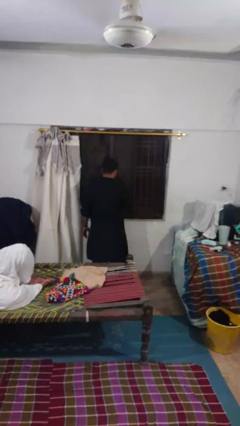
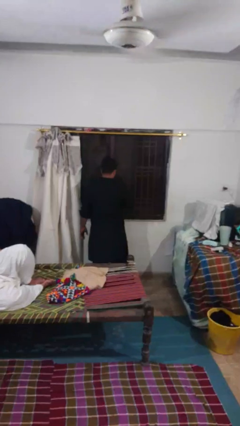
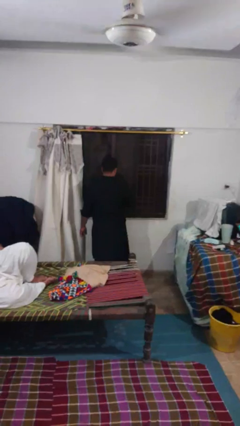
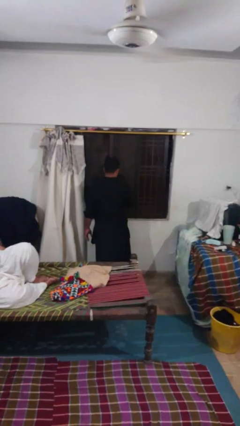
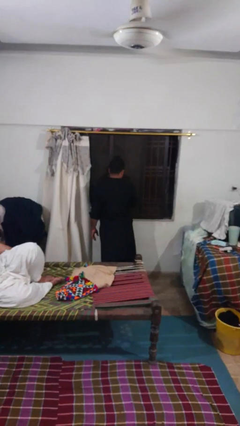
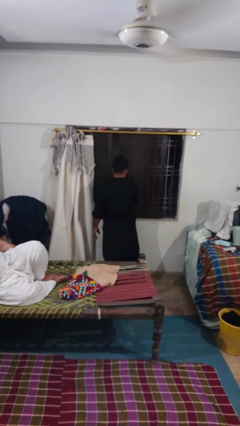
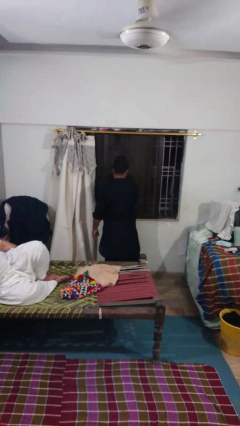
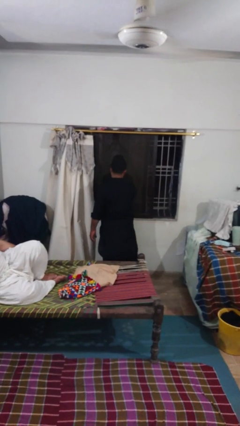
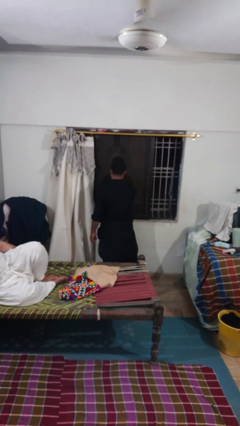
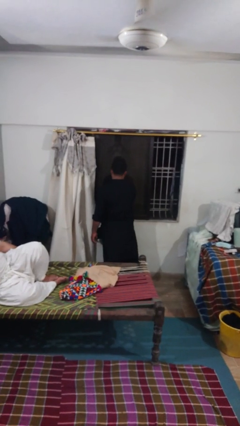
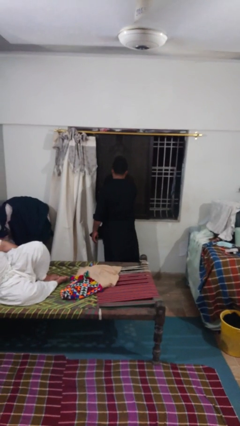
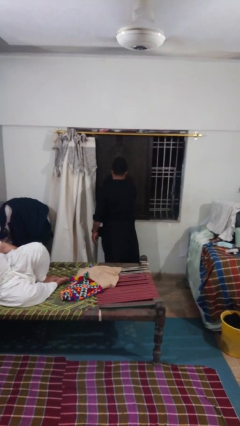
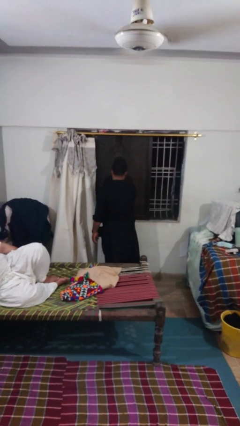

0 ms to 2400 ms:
person opens sliding door

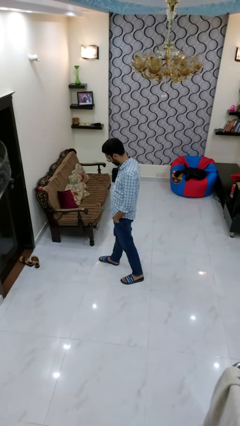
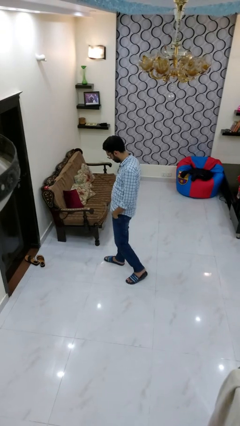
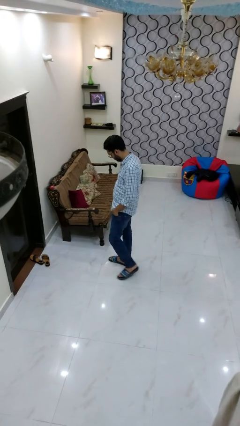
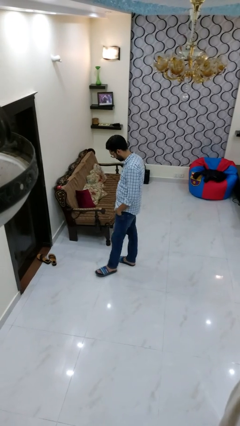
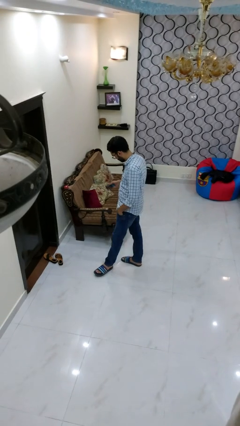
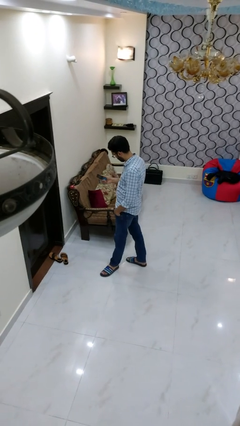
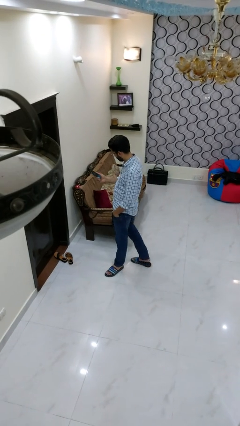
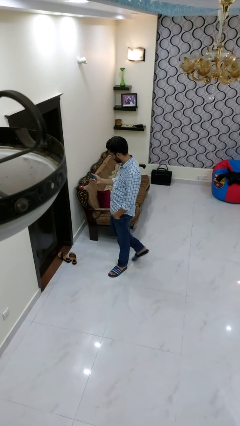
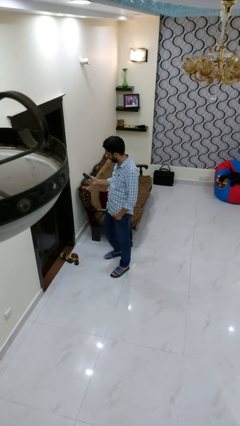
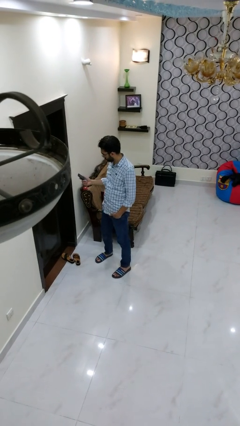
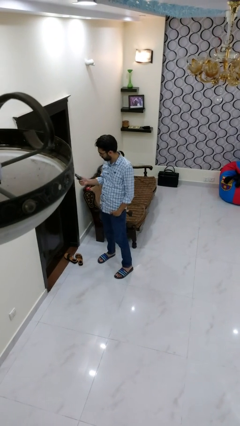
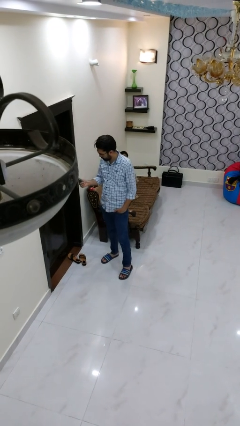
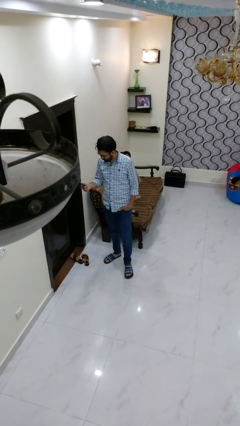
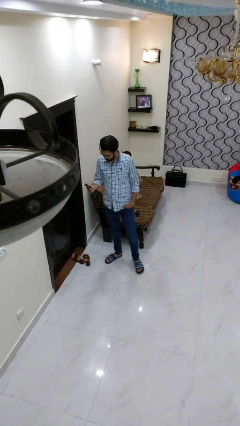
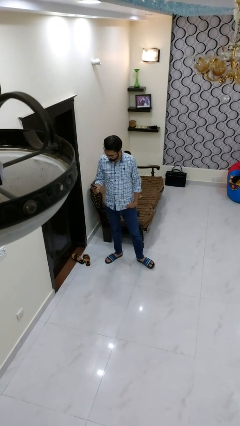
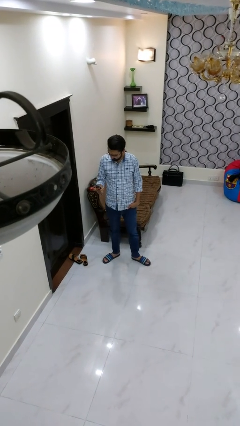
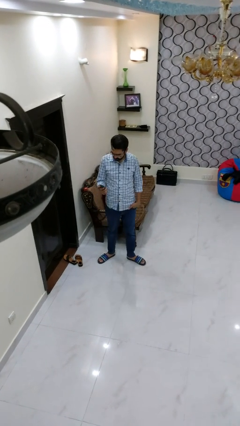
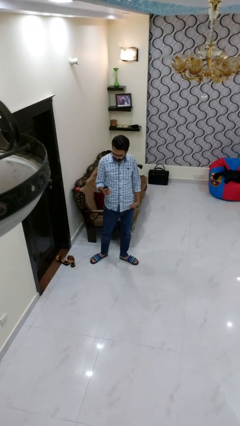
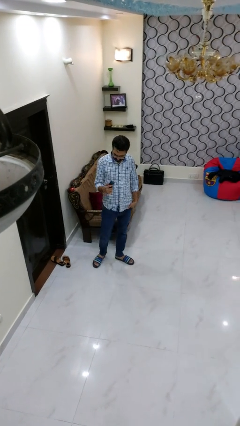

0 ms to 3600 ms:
person takes phone from pocket

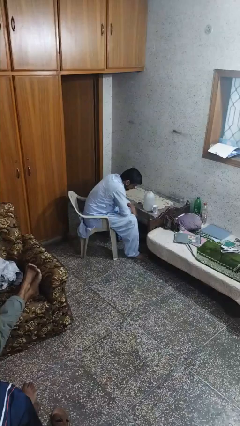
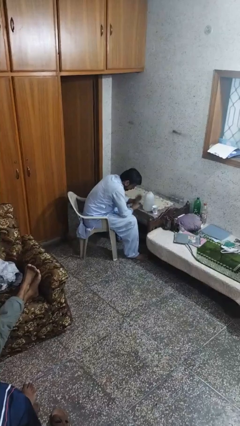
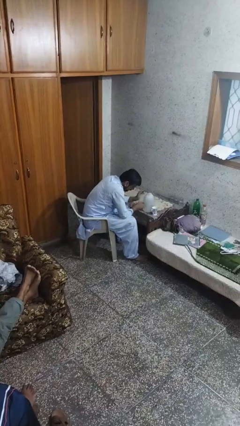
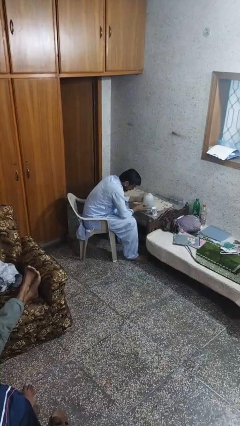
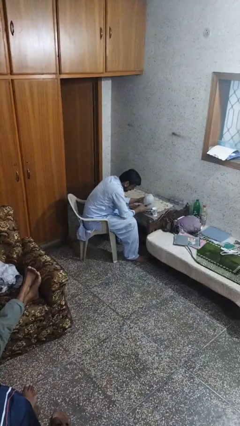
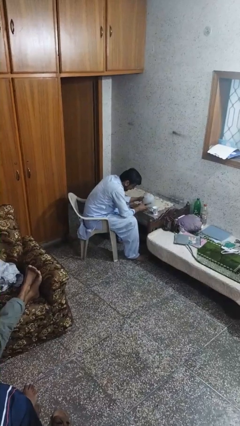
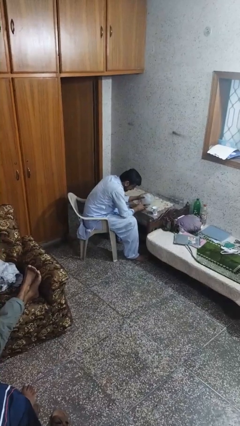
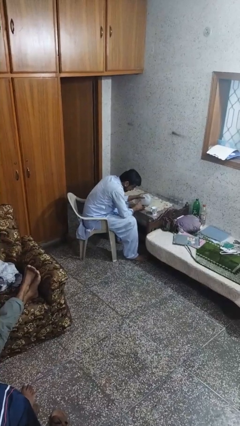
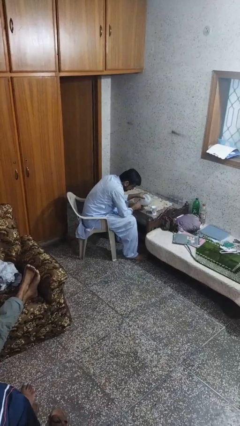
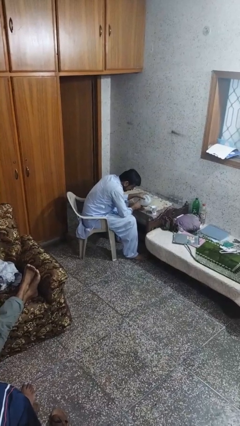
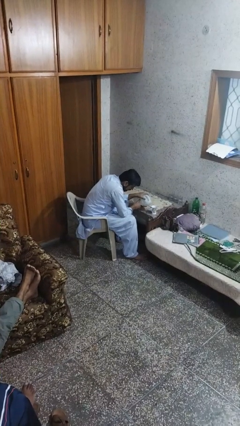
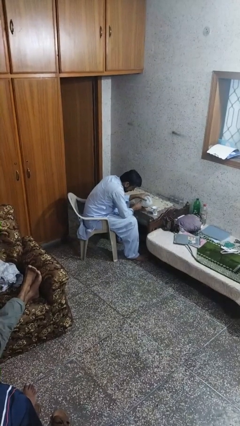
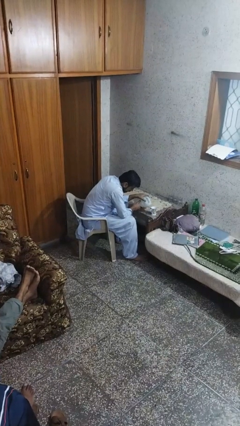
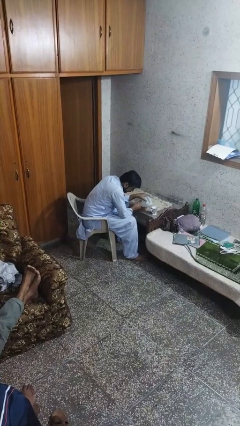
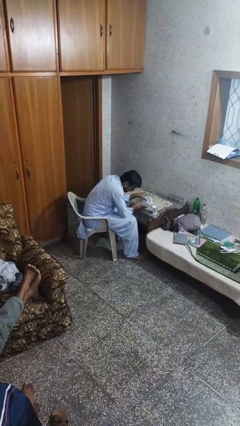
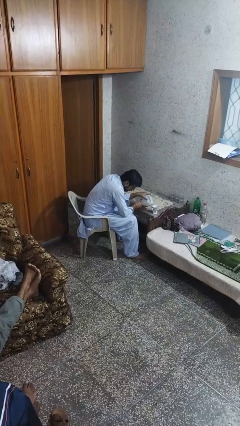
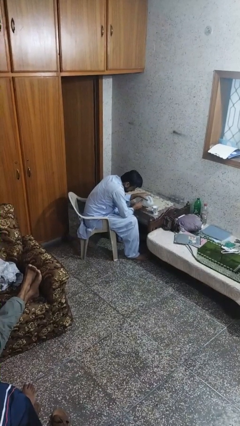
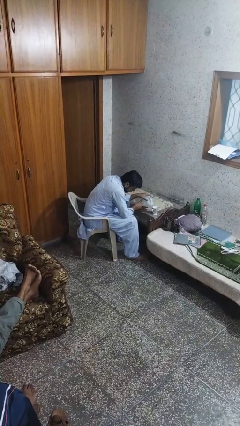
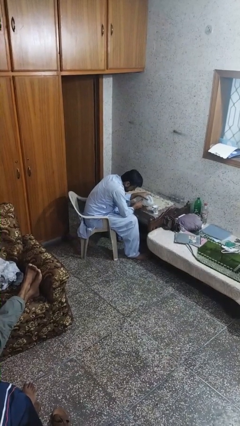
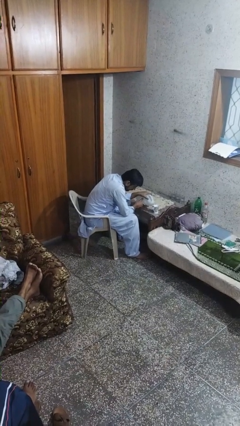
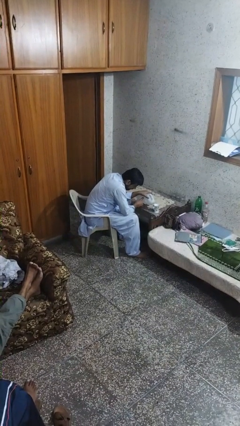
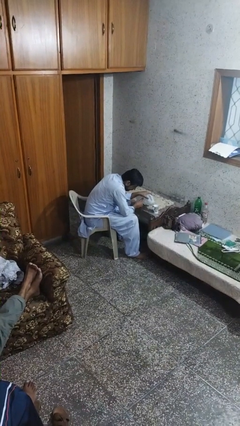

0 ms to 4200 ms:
person pours liquid into cup

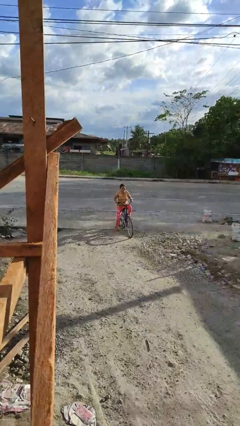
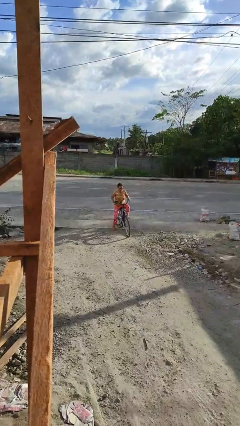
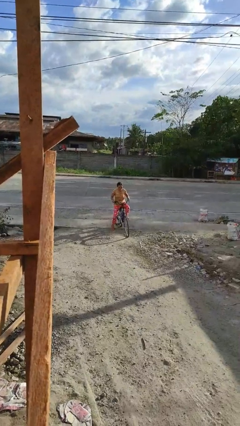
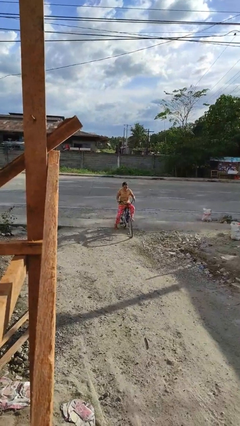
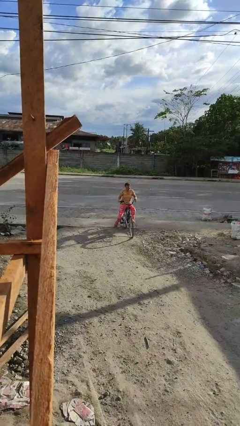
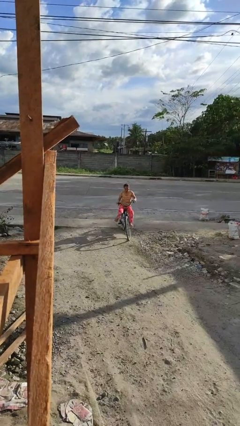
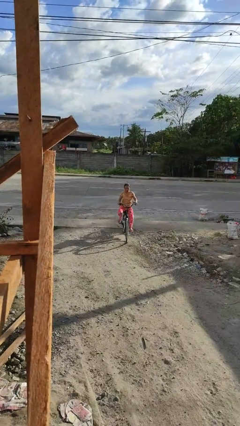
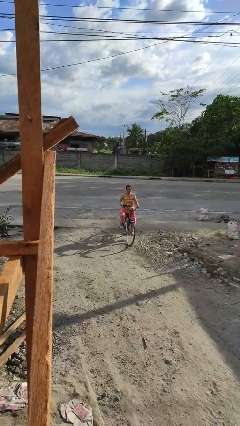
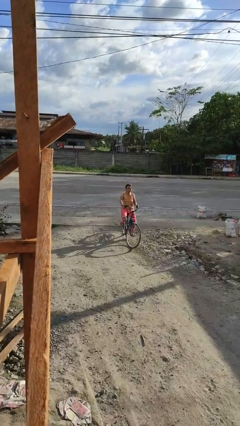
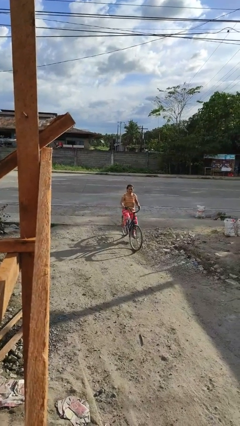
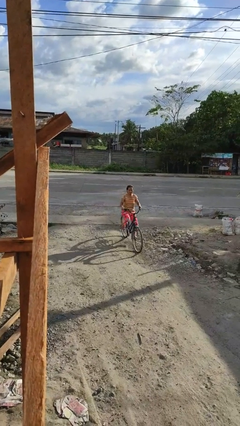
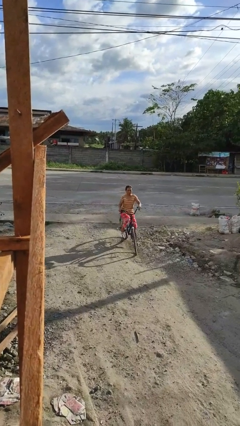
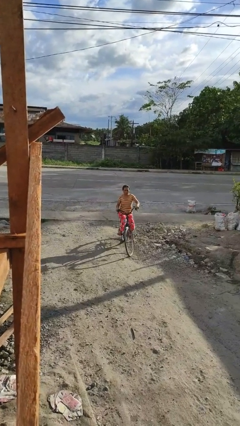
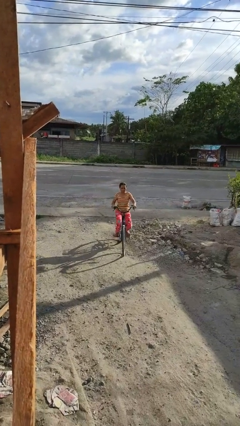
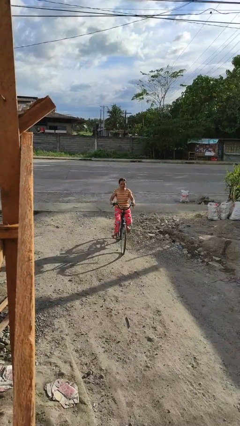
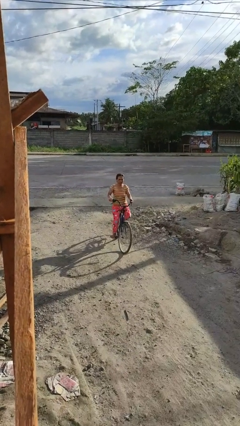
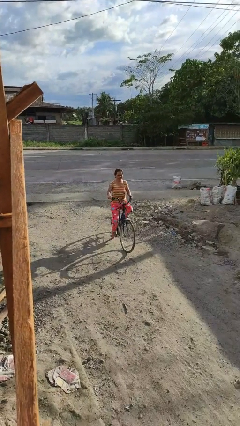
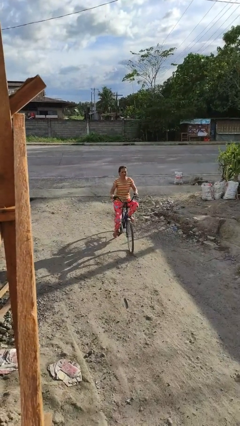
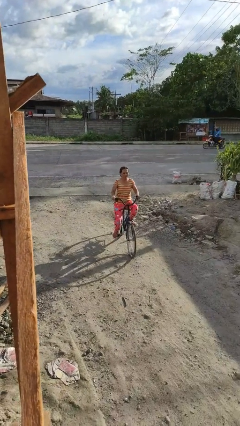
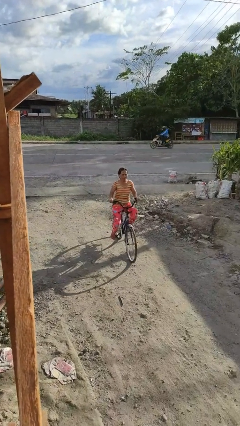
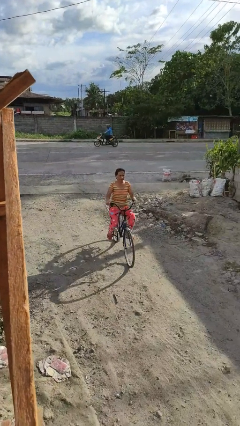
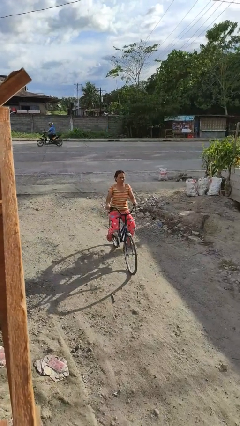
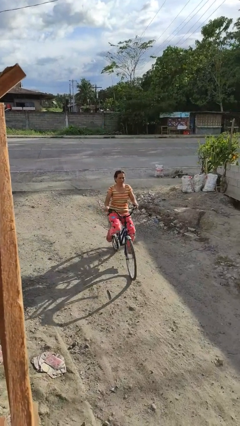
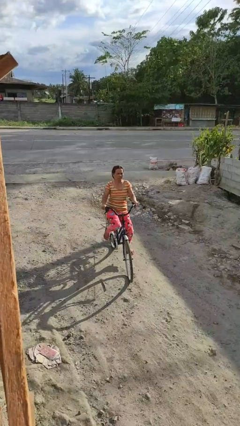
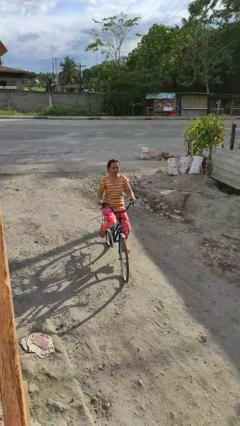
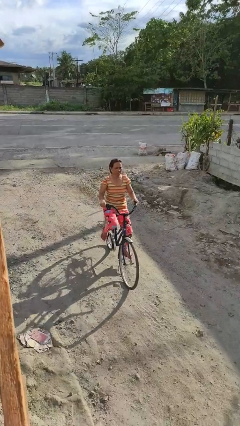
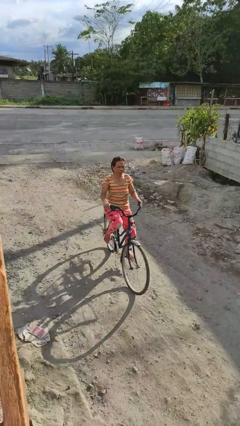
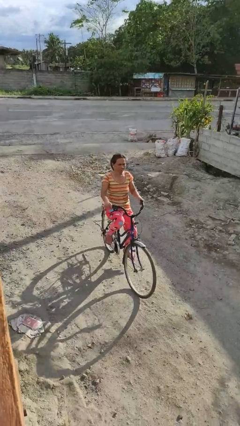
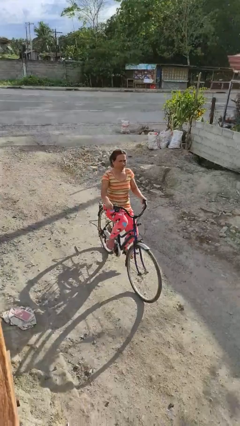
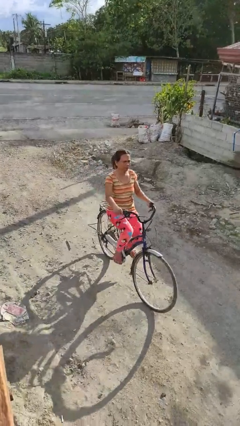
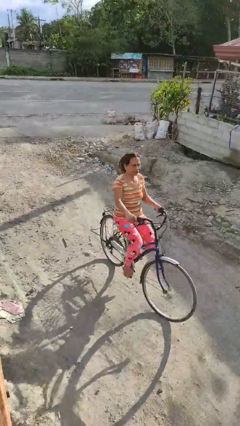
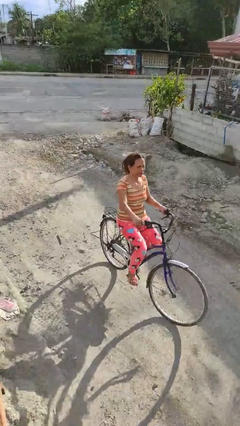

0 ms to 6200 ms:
person rides bicycle

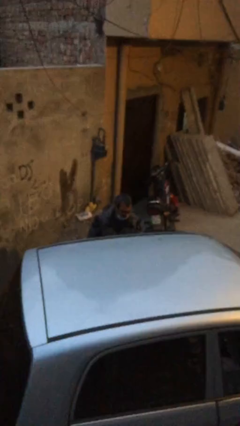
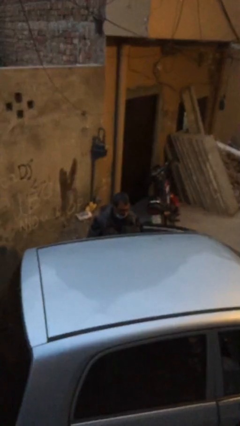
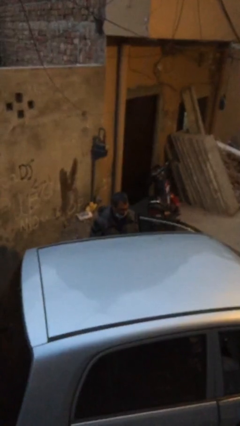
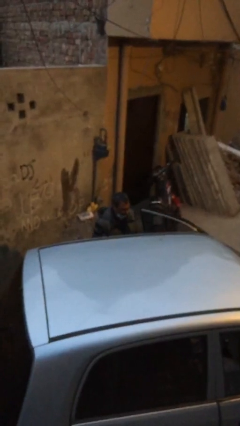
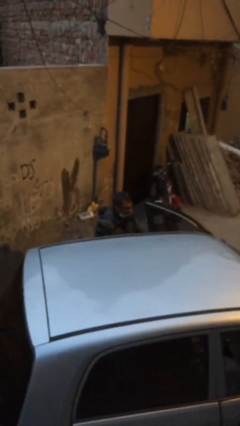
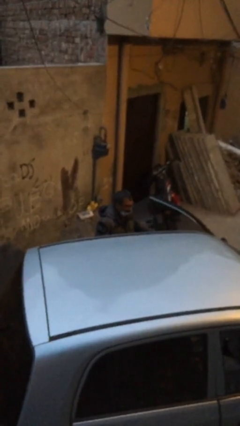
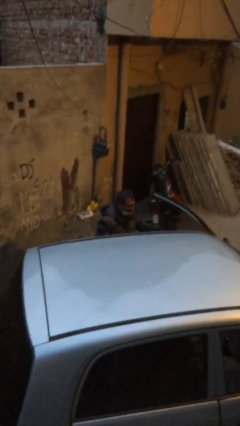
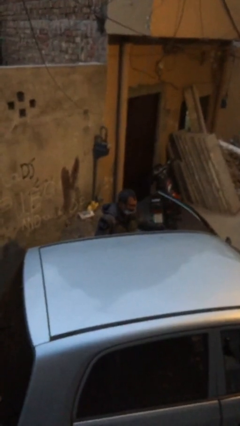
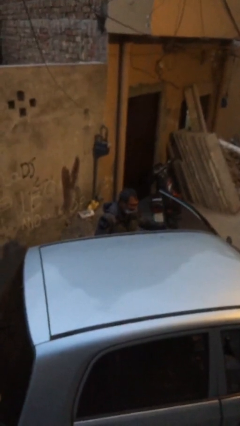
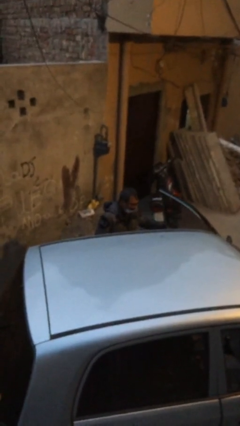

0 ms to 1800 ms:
person opens car door
